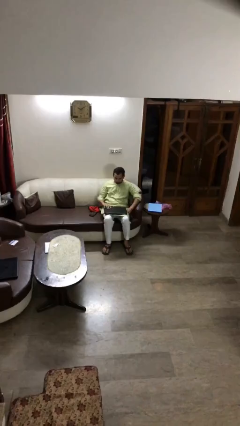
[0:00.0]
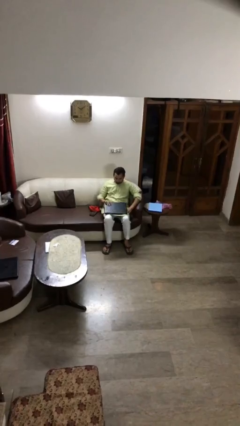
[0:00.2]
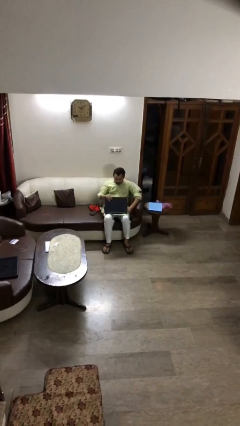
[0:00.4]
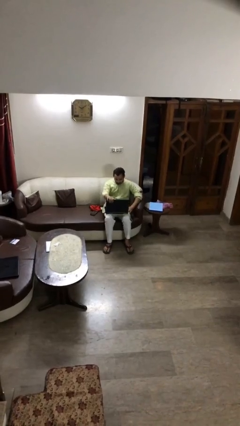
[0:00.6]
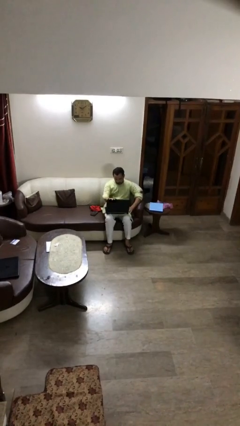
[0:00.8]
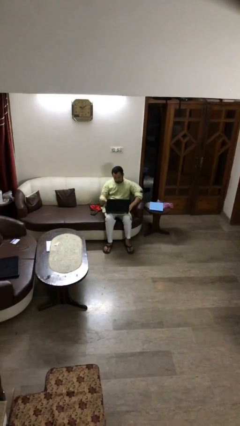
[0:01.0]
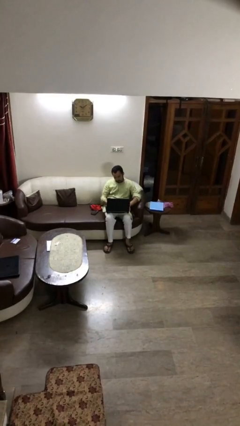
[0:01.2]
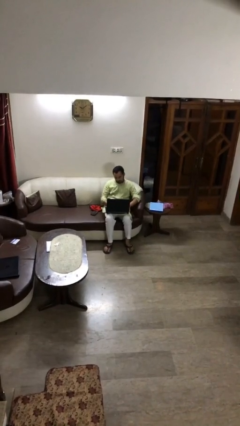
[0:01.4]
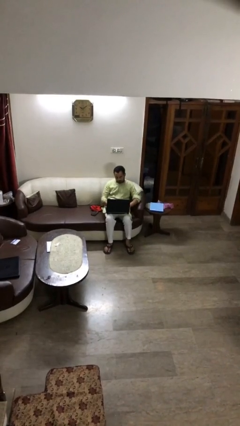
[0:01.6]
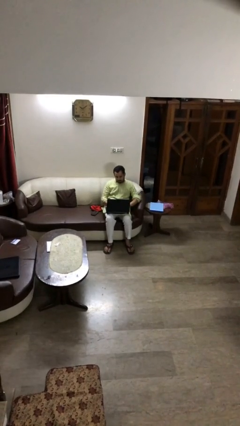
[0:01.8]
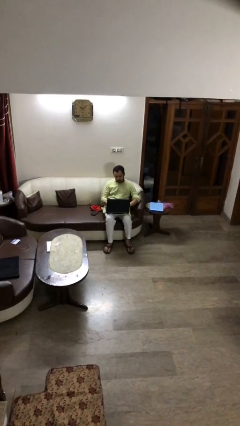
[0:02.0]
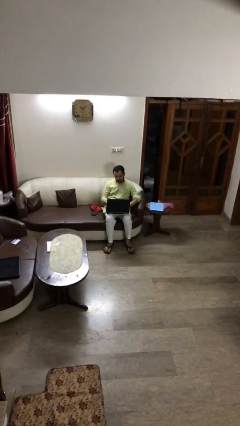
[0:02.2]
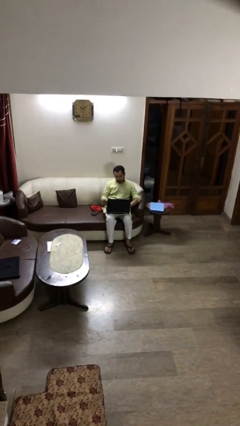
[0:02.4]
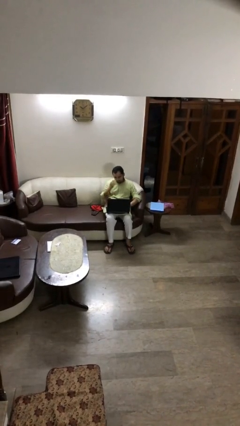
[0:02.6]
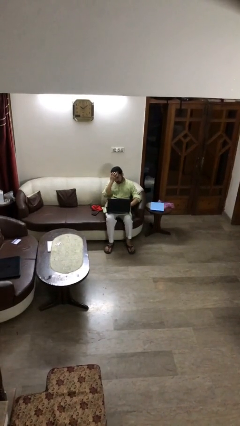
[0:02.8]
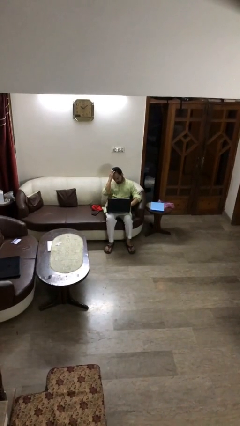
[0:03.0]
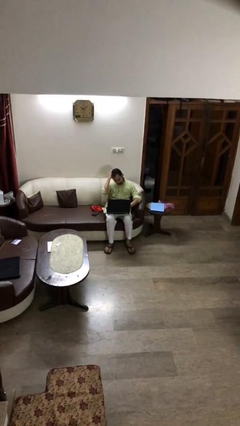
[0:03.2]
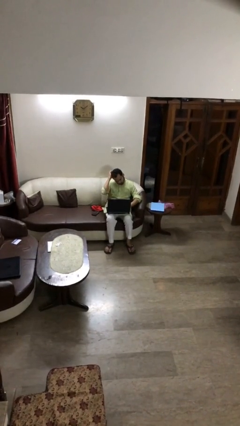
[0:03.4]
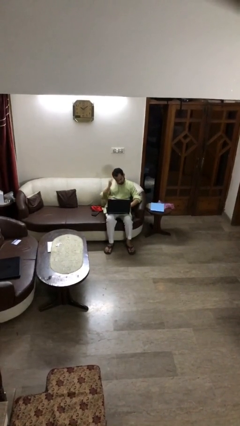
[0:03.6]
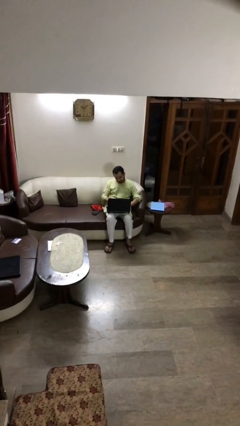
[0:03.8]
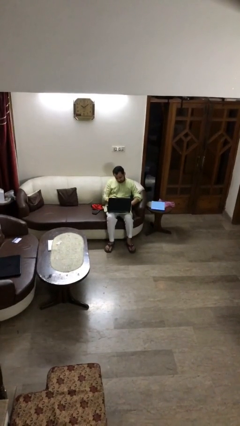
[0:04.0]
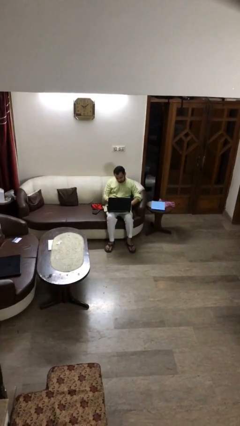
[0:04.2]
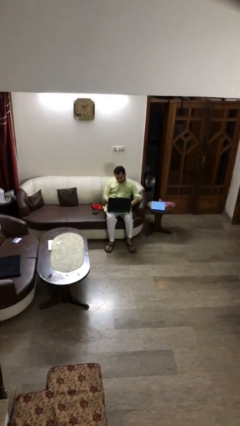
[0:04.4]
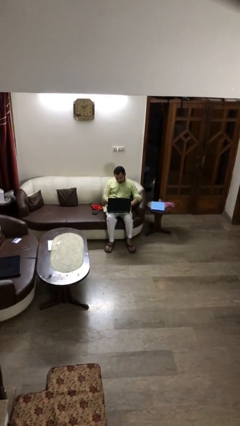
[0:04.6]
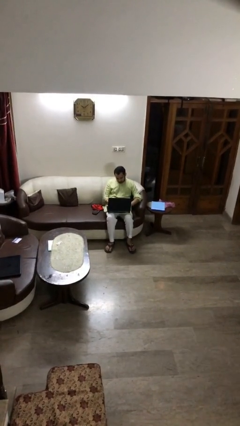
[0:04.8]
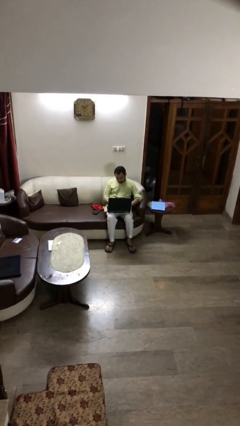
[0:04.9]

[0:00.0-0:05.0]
person interacts with laptop

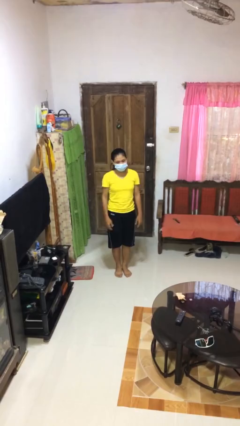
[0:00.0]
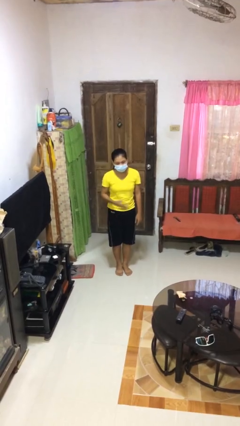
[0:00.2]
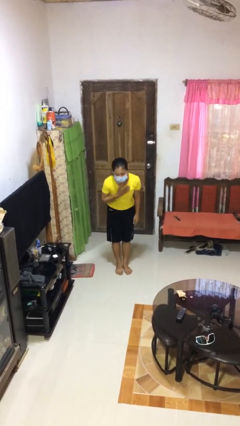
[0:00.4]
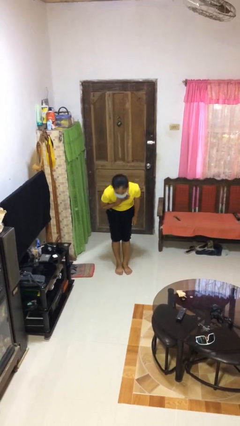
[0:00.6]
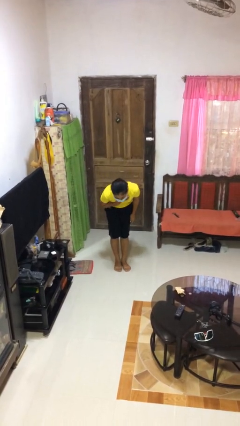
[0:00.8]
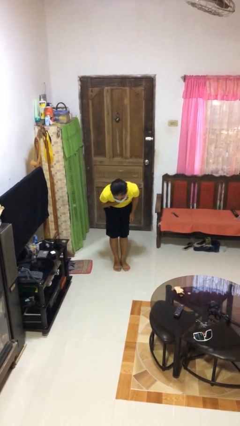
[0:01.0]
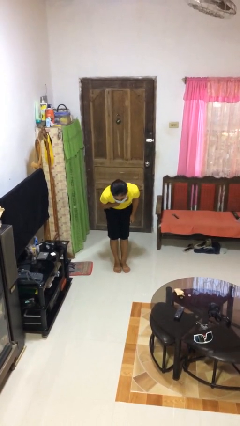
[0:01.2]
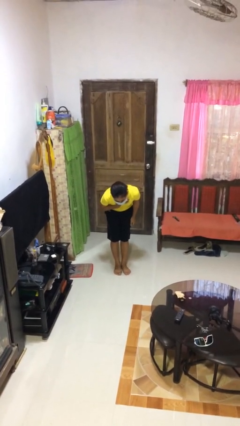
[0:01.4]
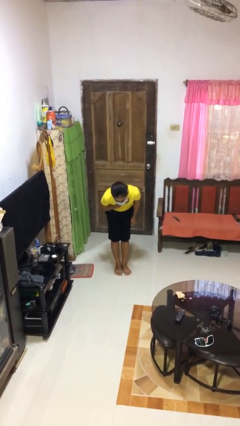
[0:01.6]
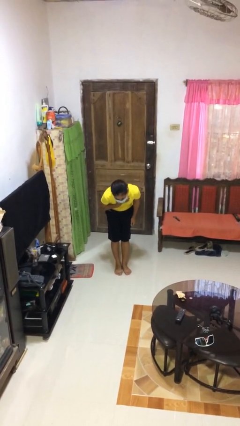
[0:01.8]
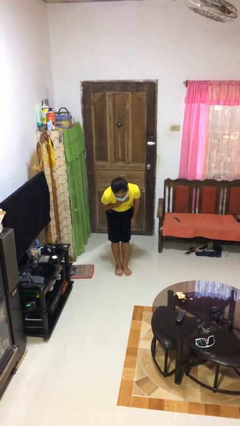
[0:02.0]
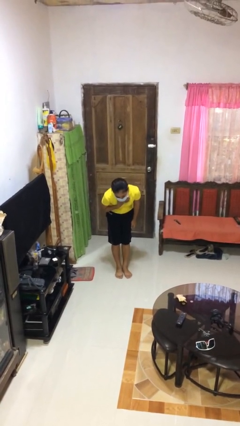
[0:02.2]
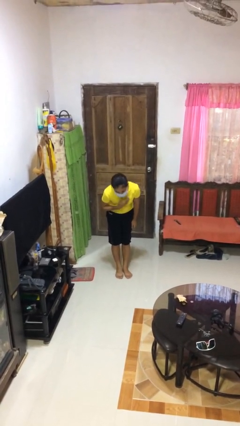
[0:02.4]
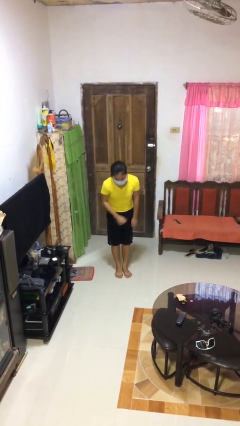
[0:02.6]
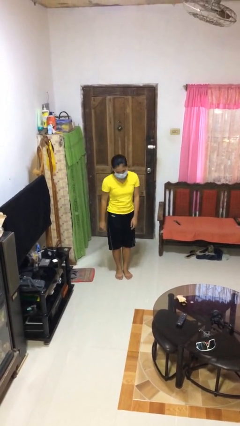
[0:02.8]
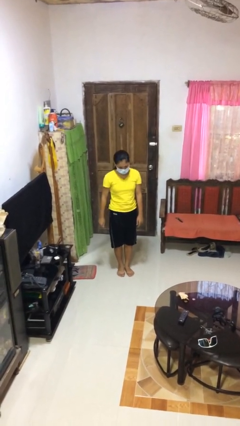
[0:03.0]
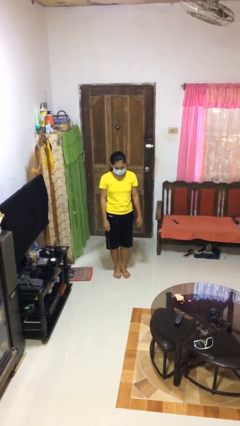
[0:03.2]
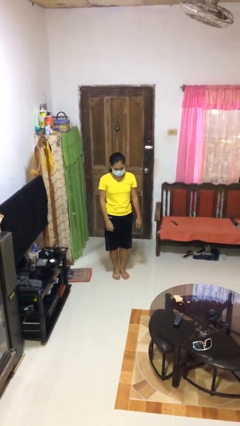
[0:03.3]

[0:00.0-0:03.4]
person bows

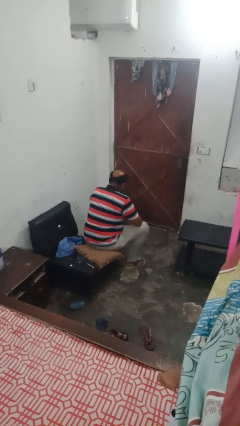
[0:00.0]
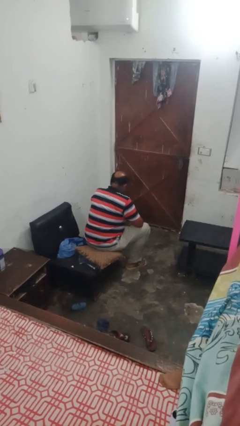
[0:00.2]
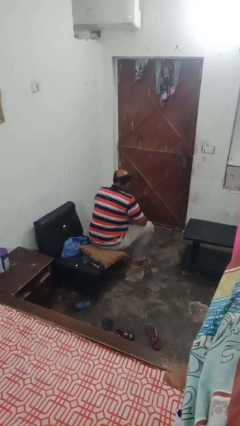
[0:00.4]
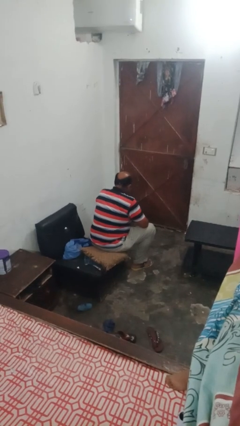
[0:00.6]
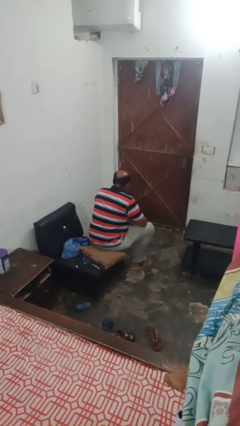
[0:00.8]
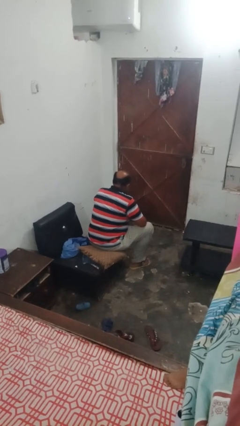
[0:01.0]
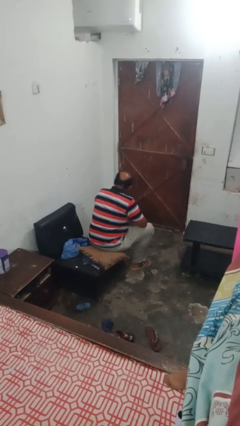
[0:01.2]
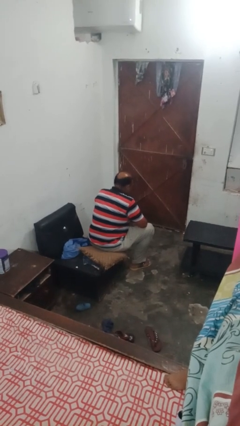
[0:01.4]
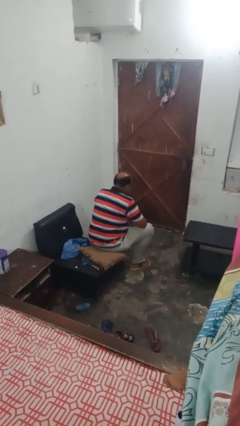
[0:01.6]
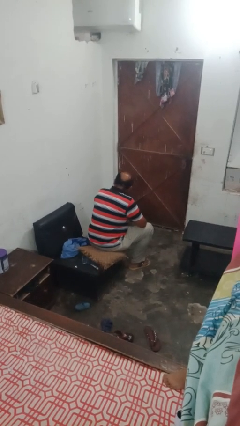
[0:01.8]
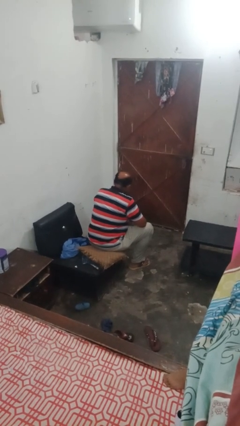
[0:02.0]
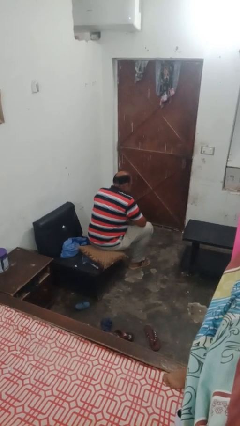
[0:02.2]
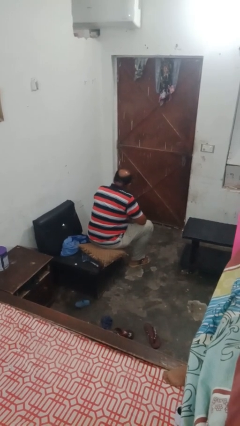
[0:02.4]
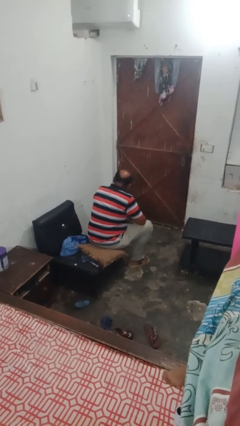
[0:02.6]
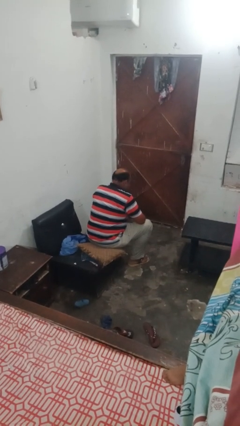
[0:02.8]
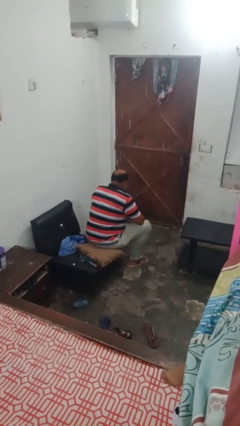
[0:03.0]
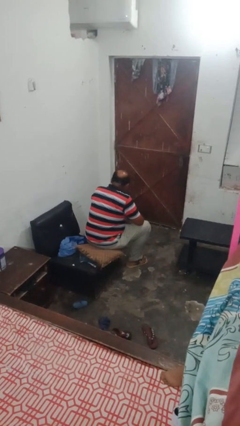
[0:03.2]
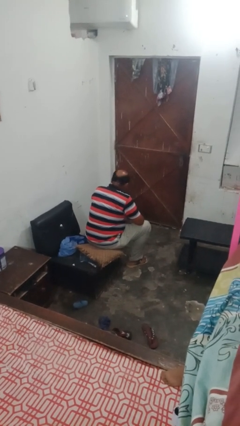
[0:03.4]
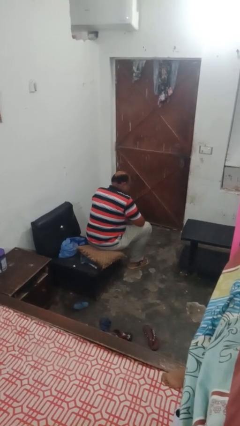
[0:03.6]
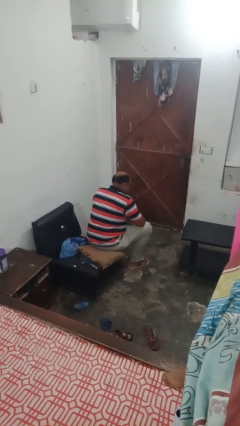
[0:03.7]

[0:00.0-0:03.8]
person shakes head

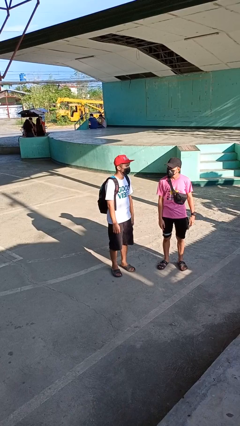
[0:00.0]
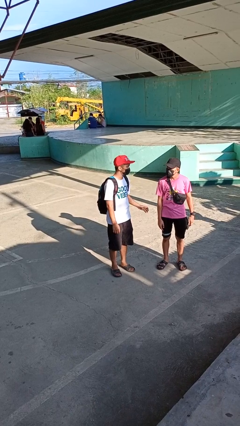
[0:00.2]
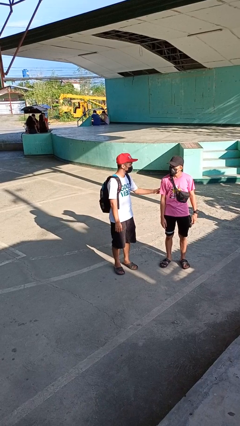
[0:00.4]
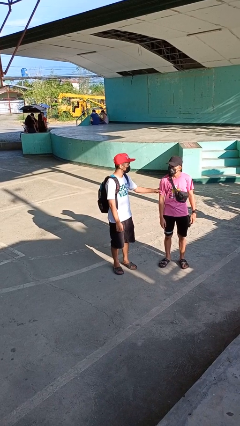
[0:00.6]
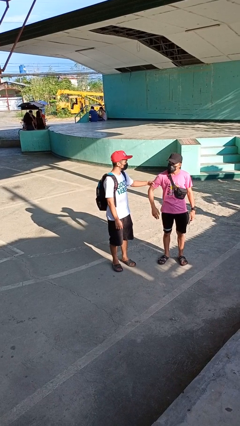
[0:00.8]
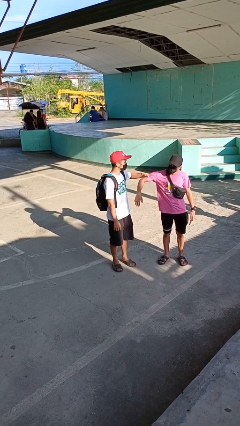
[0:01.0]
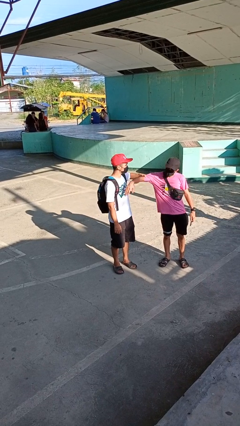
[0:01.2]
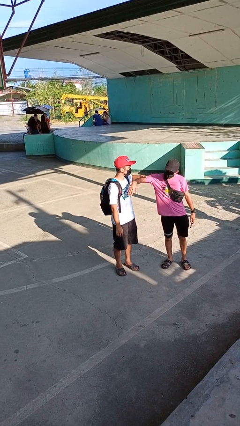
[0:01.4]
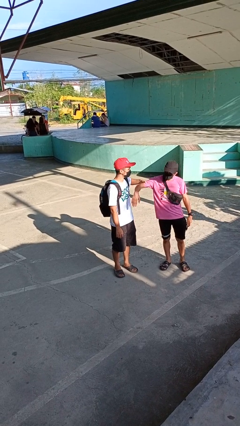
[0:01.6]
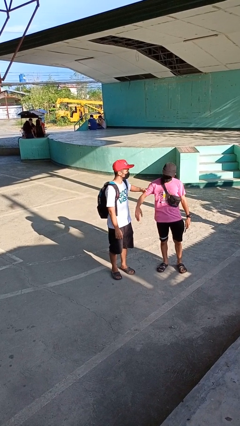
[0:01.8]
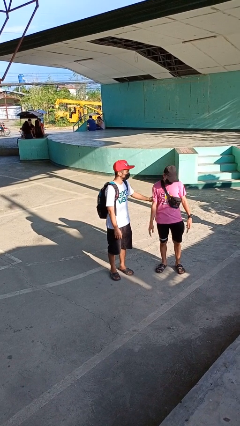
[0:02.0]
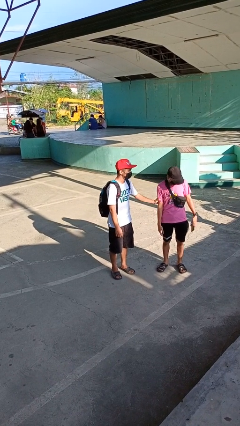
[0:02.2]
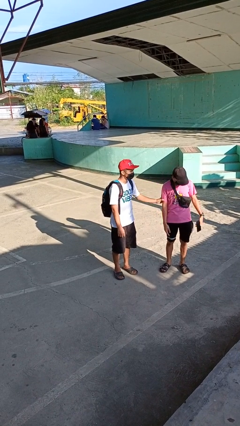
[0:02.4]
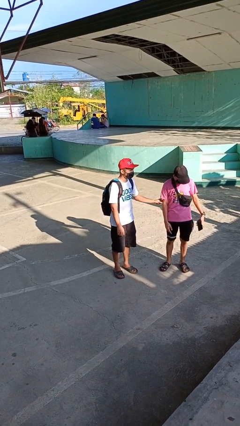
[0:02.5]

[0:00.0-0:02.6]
person grabs person by bicep

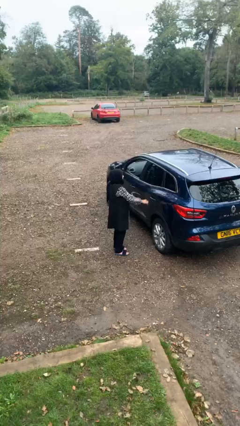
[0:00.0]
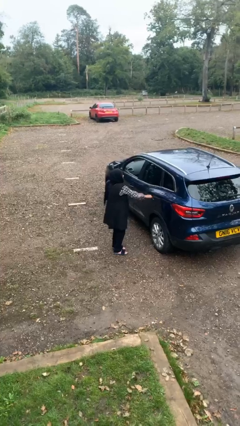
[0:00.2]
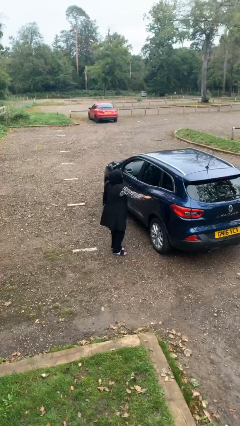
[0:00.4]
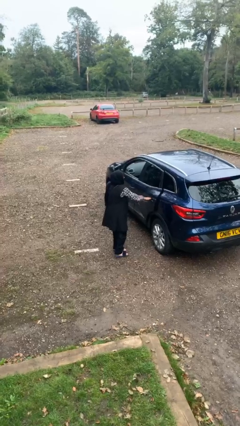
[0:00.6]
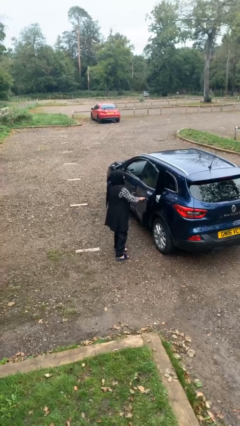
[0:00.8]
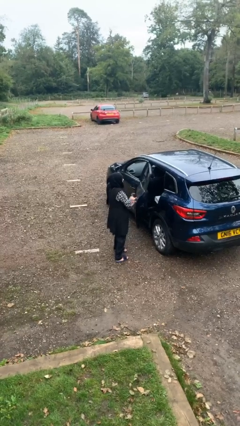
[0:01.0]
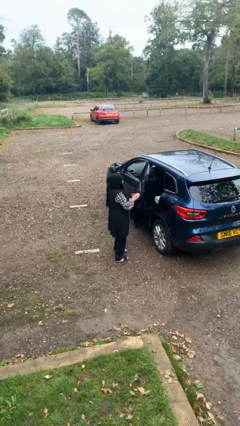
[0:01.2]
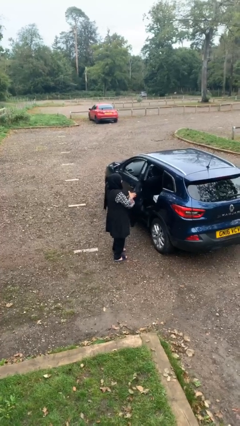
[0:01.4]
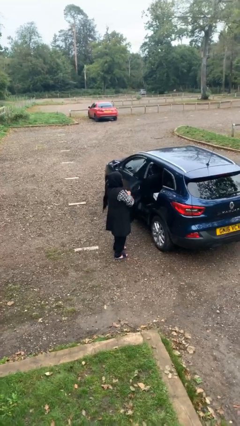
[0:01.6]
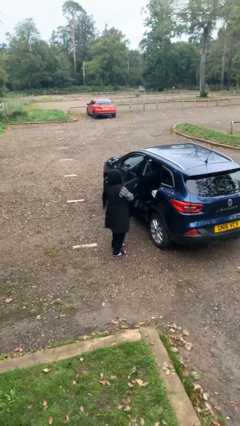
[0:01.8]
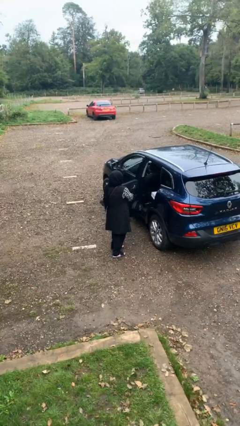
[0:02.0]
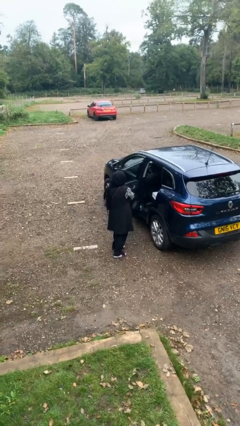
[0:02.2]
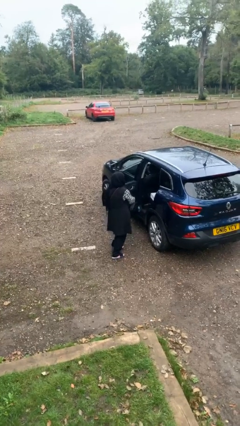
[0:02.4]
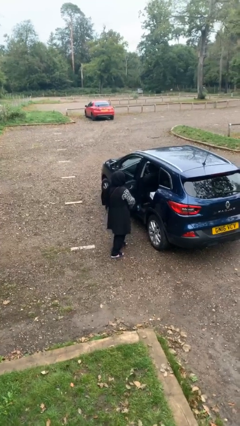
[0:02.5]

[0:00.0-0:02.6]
person opens car door
